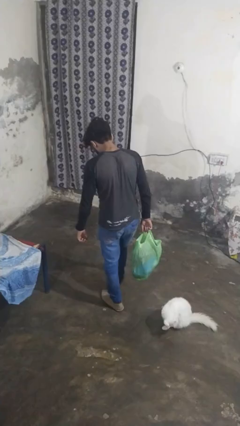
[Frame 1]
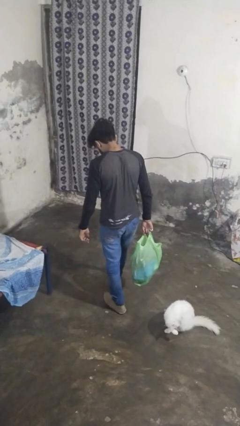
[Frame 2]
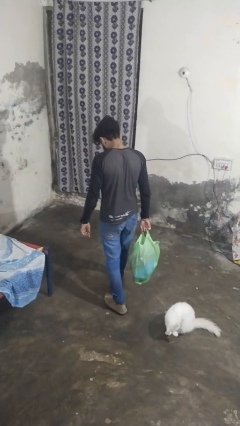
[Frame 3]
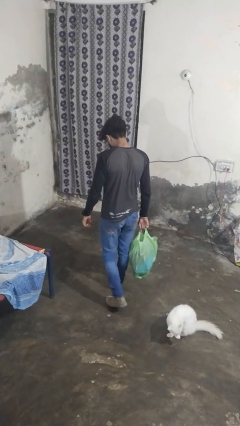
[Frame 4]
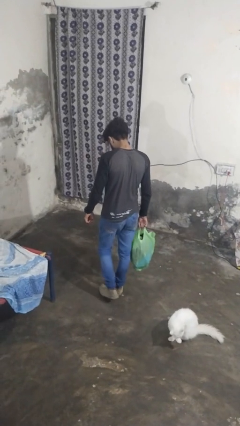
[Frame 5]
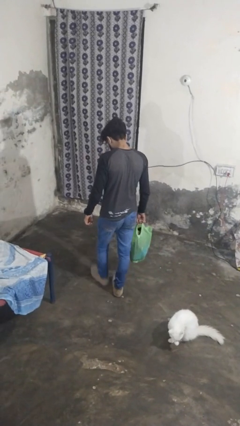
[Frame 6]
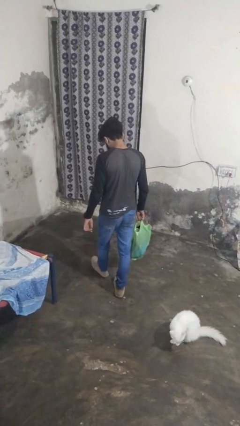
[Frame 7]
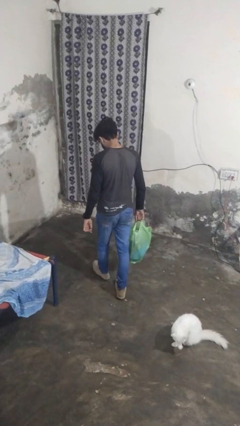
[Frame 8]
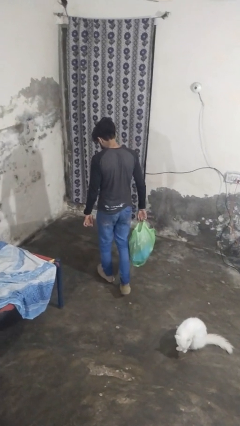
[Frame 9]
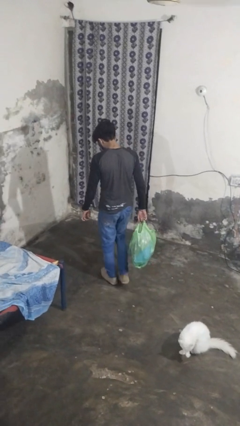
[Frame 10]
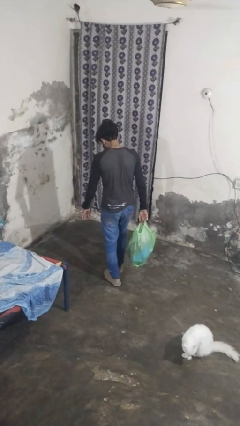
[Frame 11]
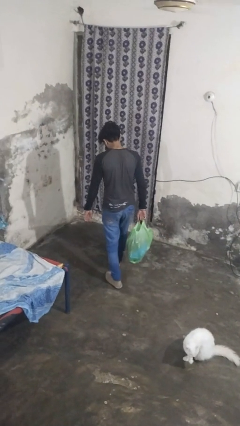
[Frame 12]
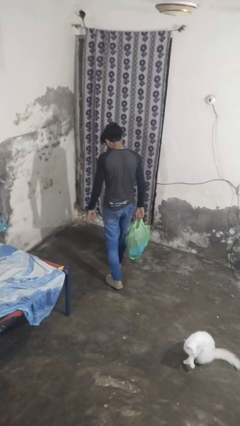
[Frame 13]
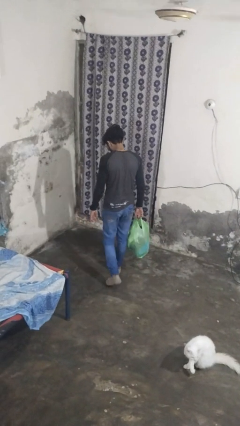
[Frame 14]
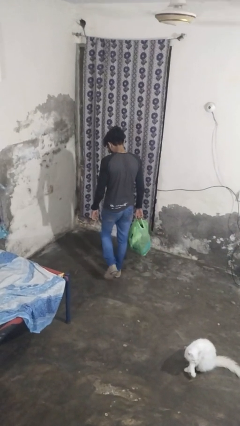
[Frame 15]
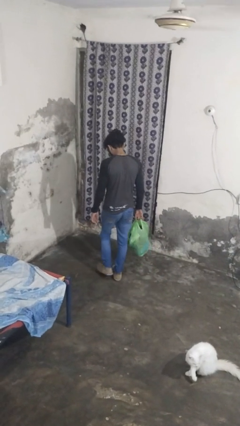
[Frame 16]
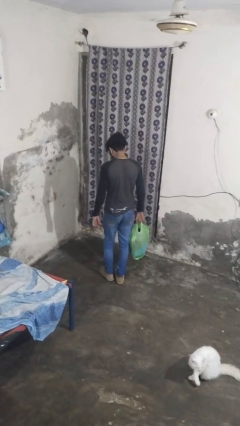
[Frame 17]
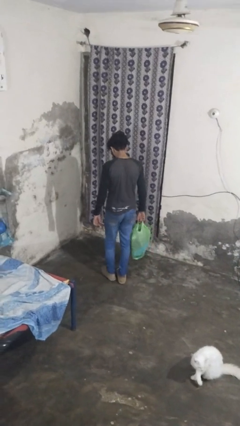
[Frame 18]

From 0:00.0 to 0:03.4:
person carries groceries

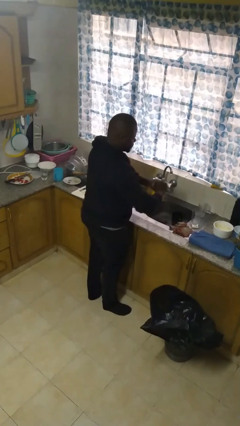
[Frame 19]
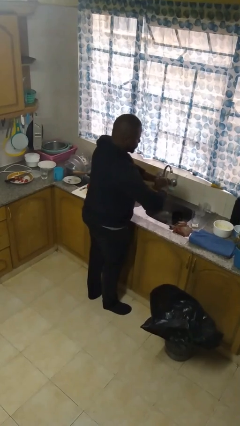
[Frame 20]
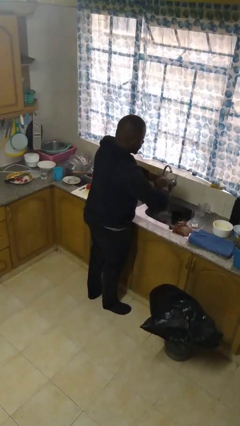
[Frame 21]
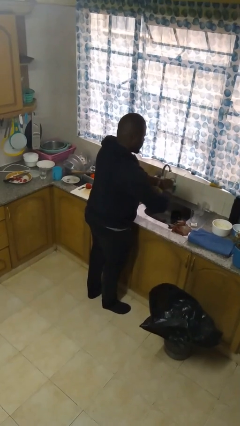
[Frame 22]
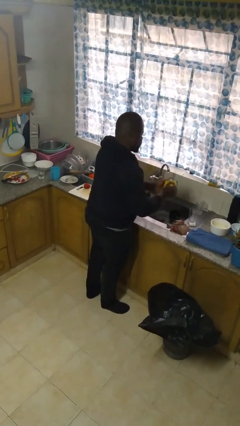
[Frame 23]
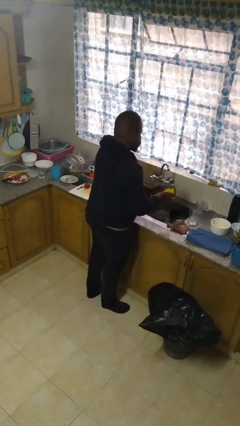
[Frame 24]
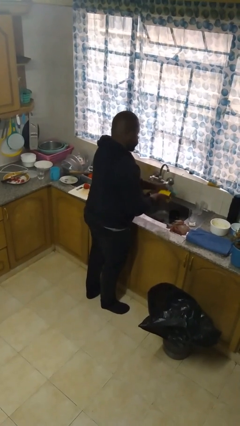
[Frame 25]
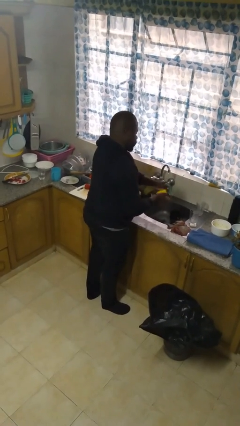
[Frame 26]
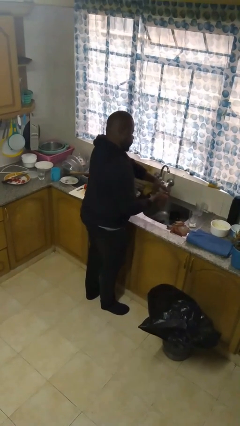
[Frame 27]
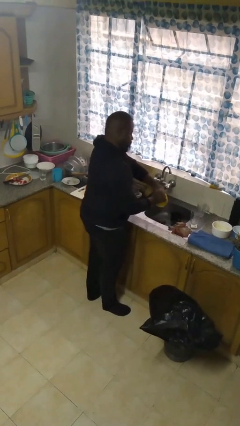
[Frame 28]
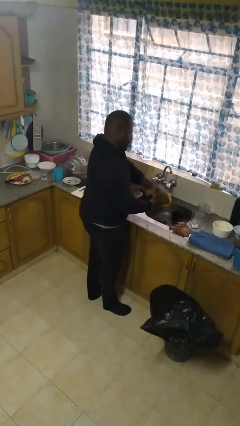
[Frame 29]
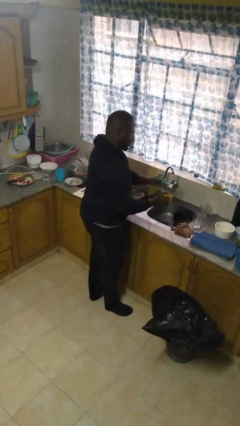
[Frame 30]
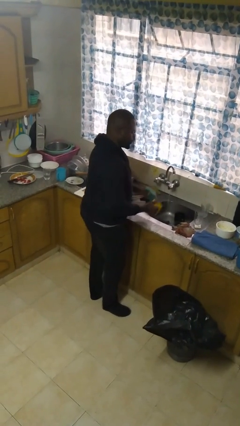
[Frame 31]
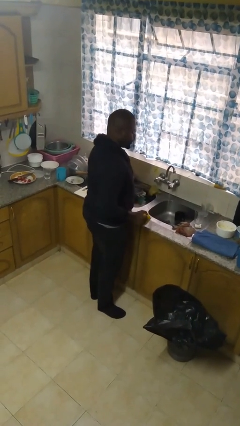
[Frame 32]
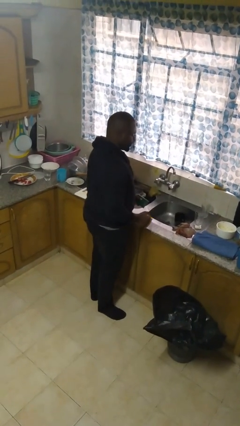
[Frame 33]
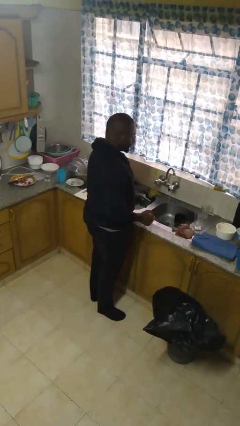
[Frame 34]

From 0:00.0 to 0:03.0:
person washes dish

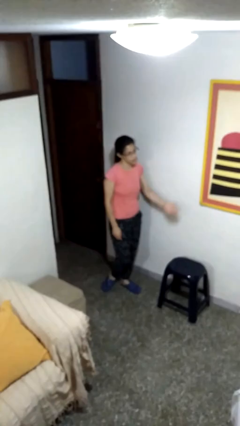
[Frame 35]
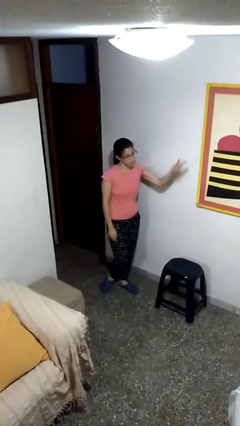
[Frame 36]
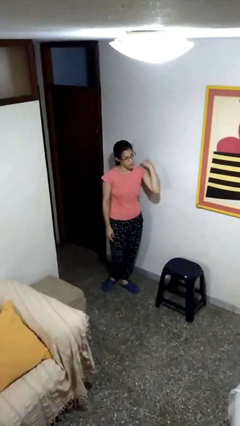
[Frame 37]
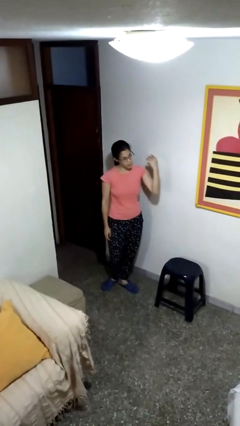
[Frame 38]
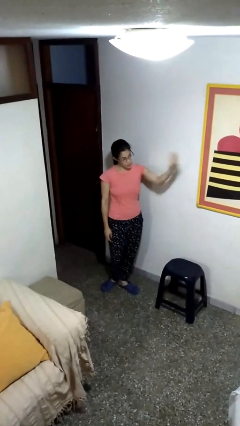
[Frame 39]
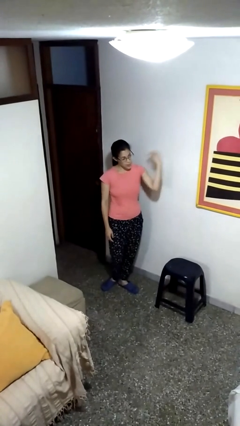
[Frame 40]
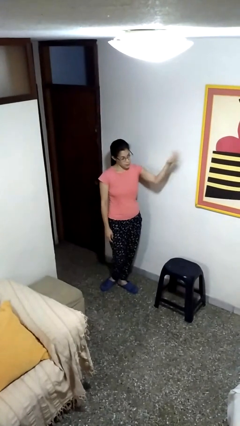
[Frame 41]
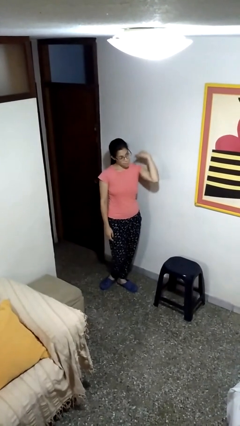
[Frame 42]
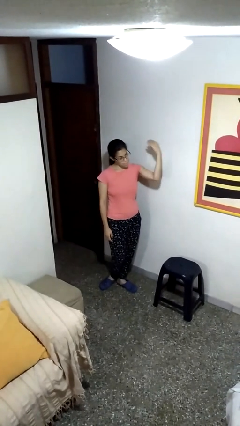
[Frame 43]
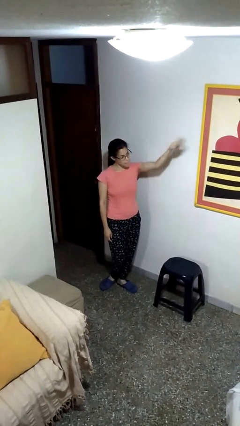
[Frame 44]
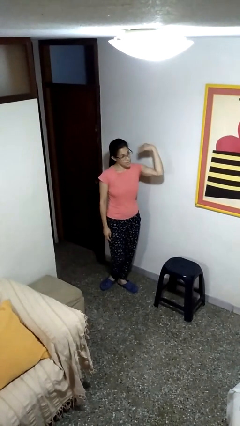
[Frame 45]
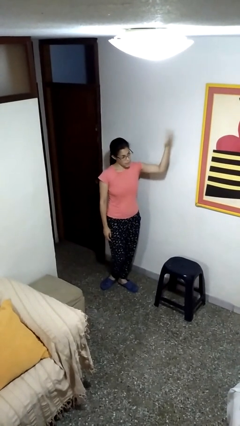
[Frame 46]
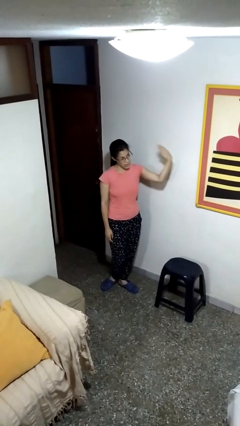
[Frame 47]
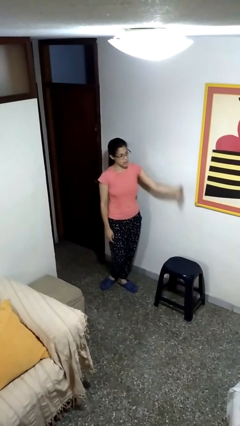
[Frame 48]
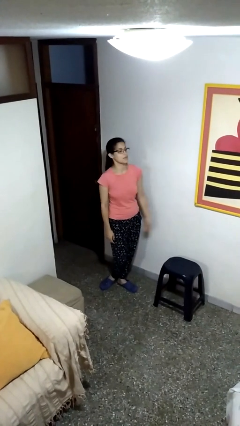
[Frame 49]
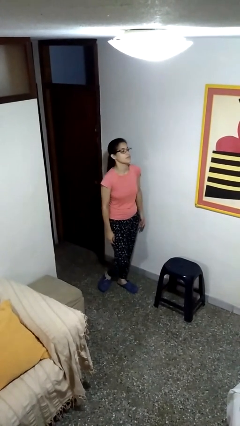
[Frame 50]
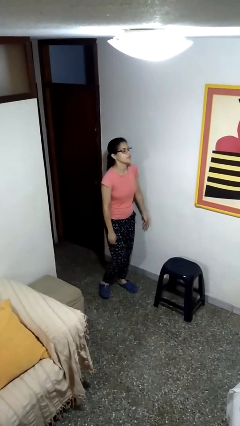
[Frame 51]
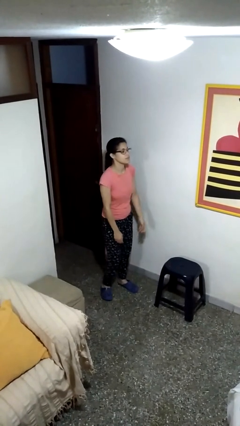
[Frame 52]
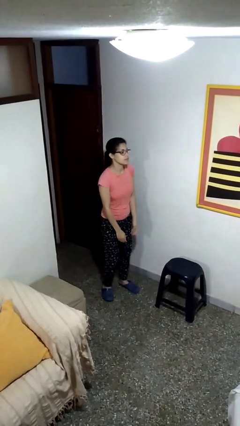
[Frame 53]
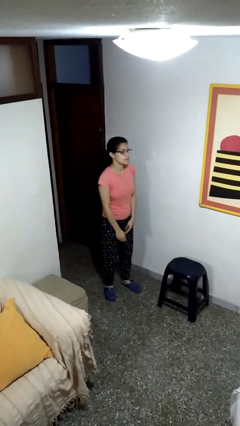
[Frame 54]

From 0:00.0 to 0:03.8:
person gestures come here

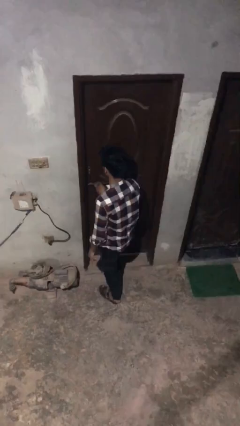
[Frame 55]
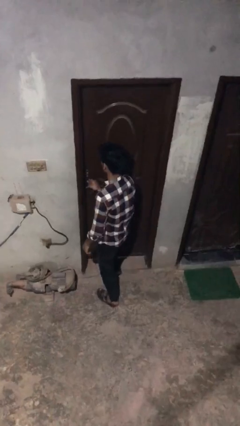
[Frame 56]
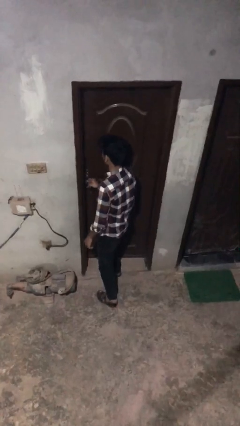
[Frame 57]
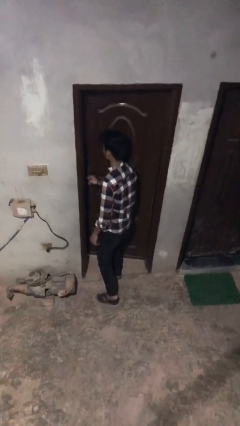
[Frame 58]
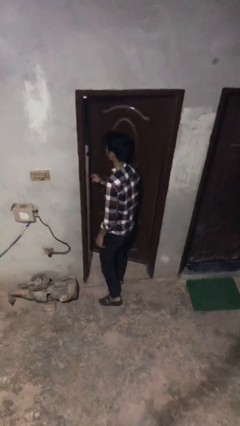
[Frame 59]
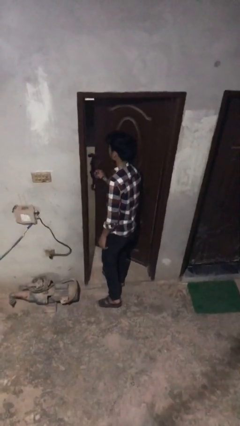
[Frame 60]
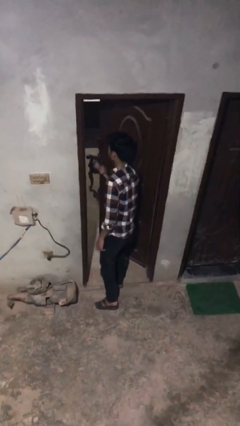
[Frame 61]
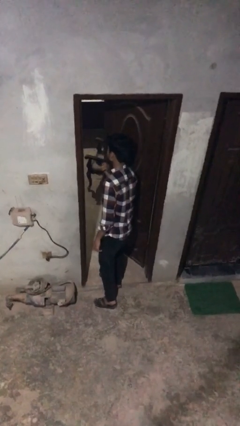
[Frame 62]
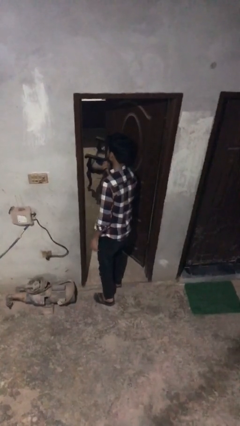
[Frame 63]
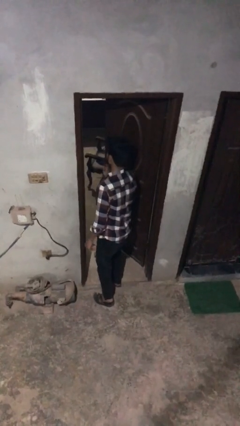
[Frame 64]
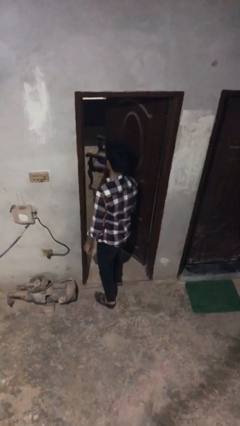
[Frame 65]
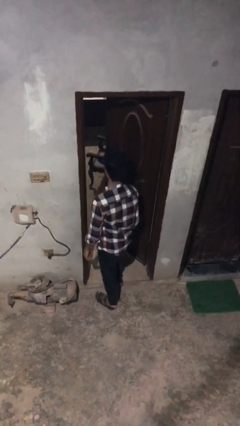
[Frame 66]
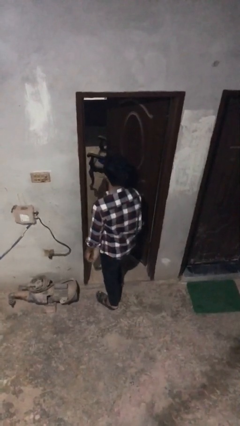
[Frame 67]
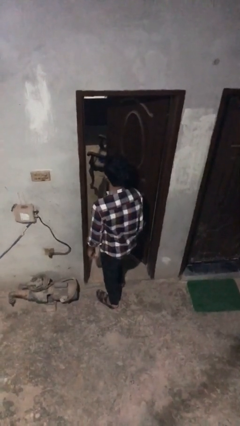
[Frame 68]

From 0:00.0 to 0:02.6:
person opens facility door

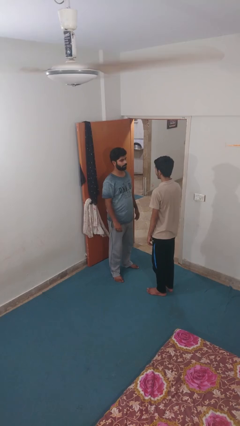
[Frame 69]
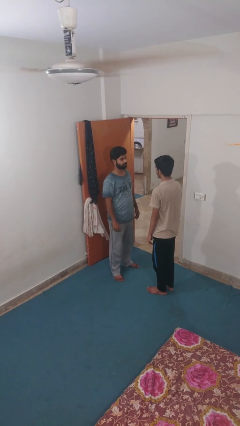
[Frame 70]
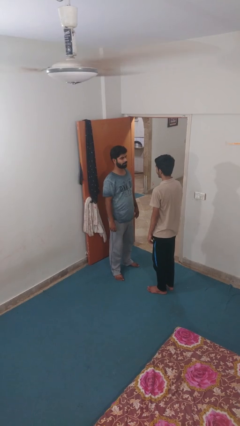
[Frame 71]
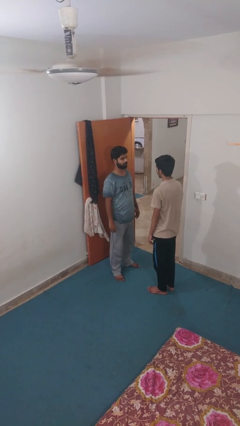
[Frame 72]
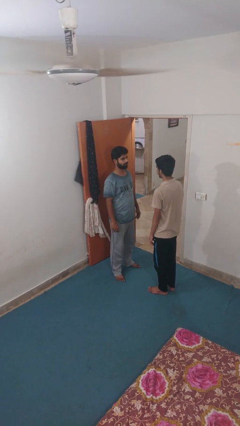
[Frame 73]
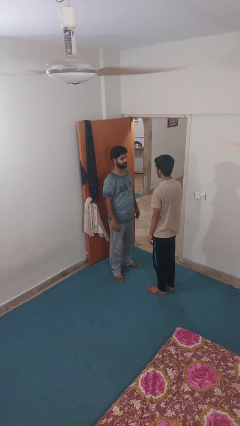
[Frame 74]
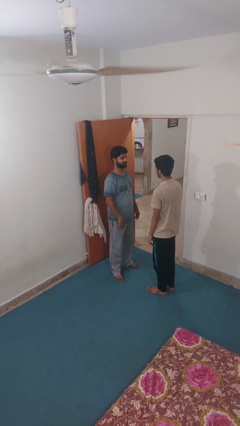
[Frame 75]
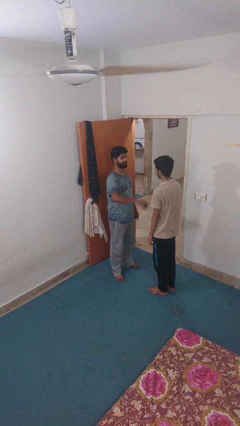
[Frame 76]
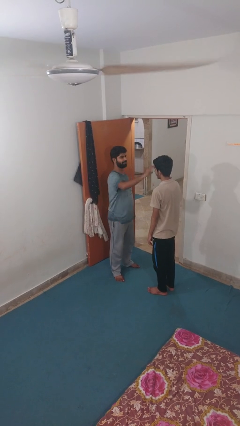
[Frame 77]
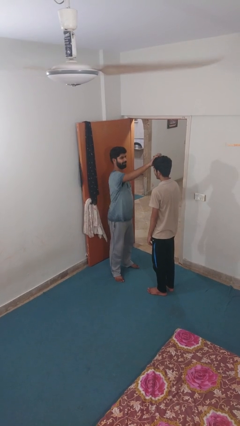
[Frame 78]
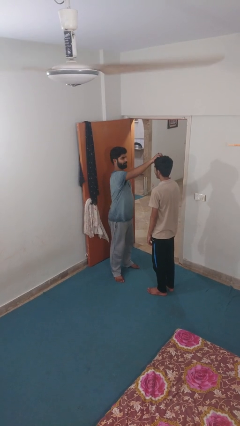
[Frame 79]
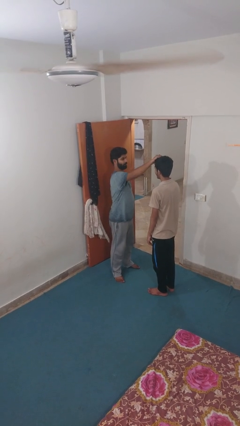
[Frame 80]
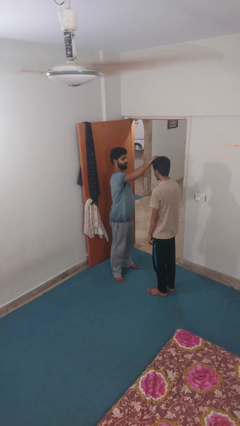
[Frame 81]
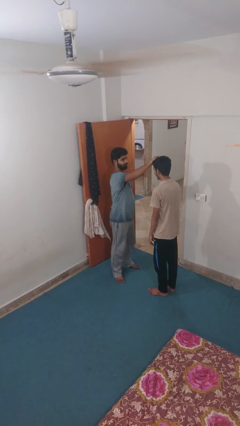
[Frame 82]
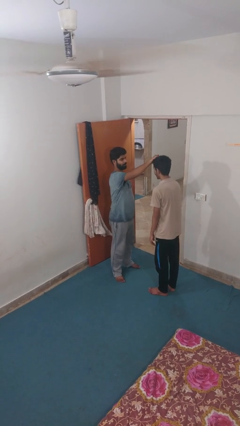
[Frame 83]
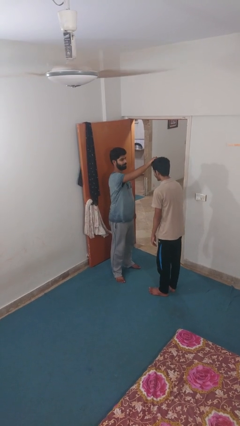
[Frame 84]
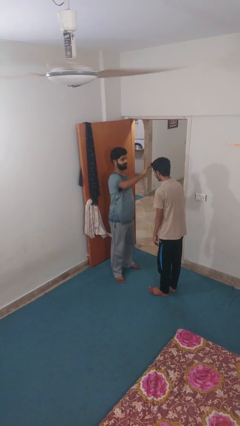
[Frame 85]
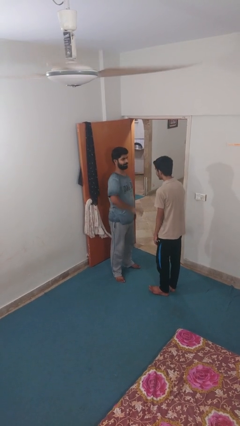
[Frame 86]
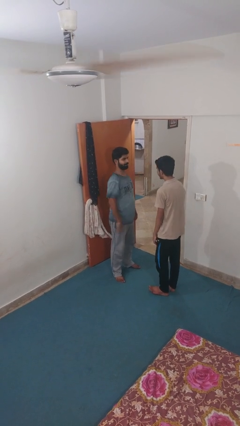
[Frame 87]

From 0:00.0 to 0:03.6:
person grabs person by hair

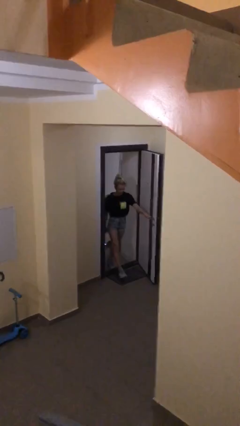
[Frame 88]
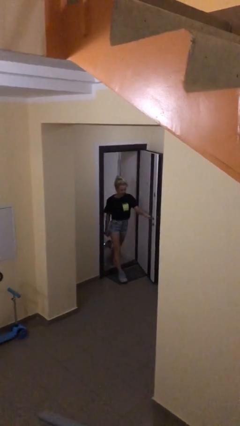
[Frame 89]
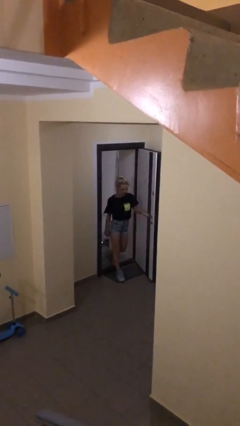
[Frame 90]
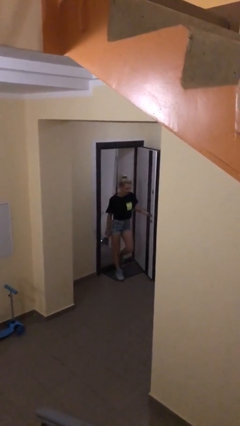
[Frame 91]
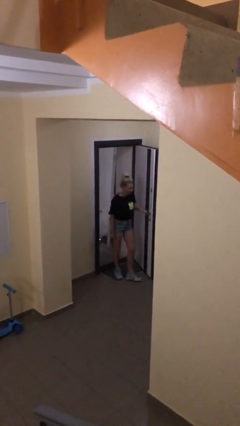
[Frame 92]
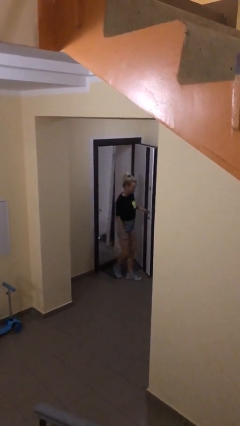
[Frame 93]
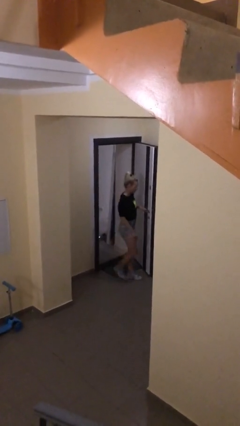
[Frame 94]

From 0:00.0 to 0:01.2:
person enters scene through structure
